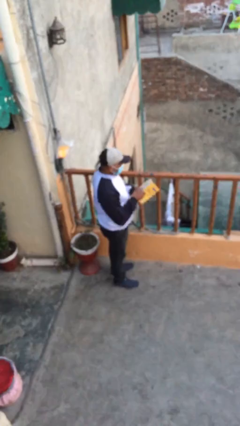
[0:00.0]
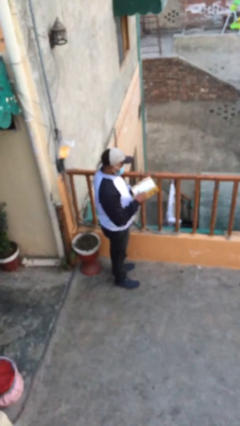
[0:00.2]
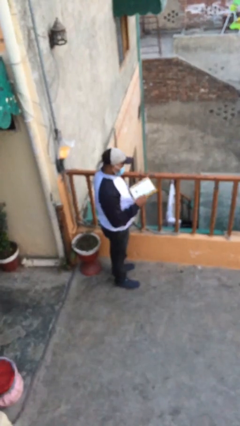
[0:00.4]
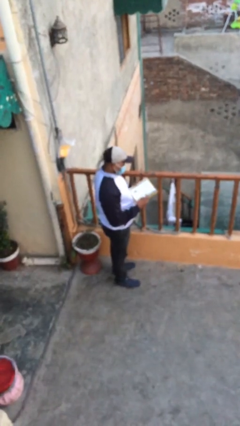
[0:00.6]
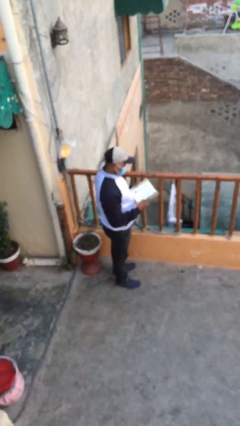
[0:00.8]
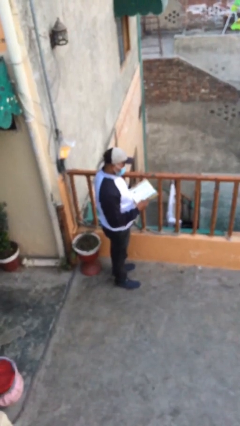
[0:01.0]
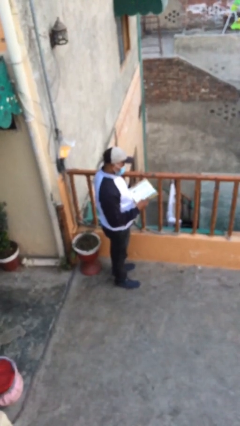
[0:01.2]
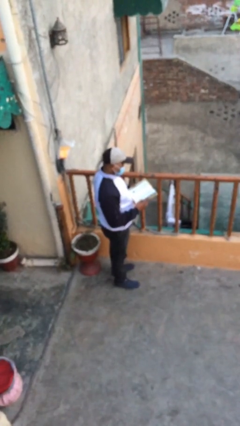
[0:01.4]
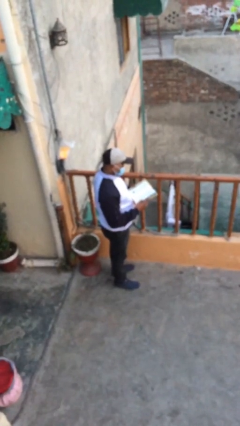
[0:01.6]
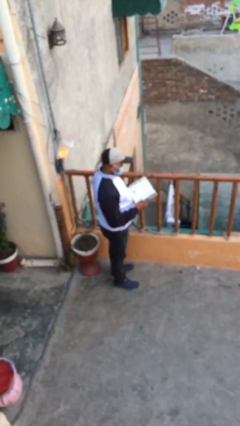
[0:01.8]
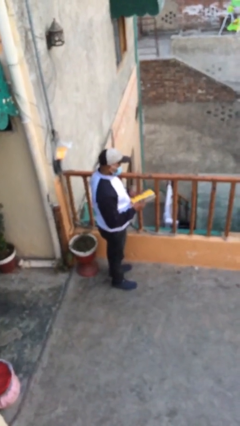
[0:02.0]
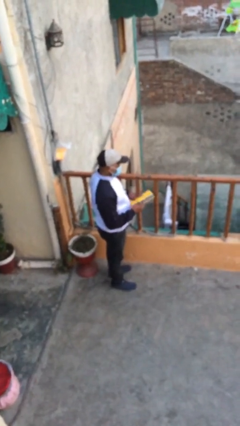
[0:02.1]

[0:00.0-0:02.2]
person reads document

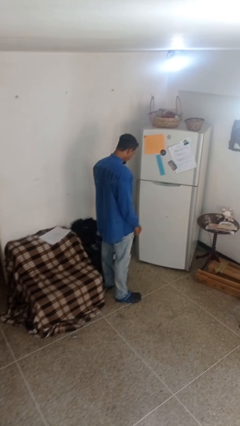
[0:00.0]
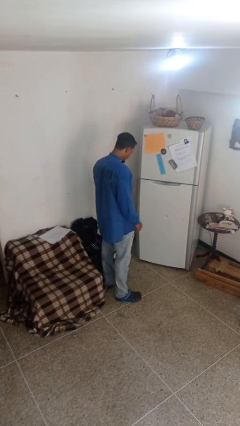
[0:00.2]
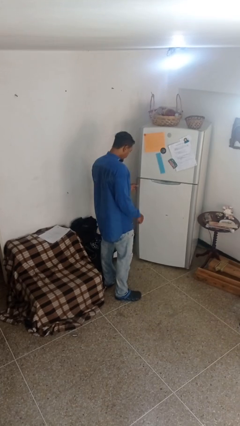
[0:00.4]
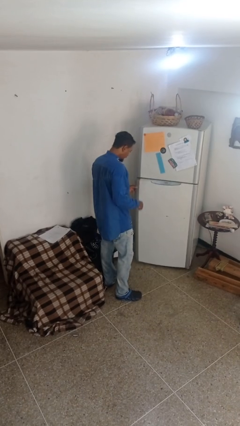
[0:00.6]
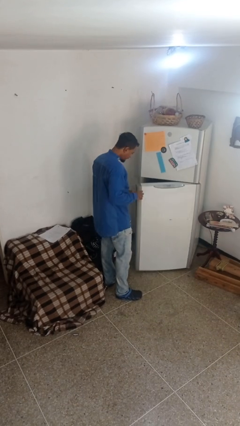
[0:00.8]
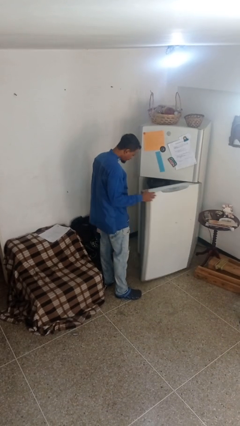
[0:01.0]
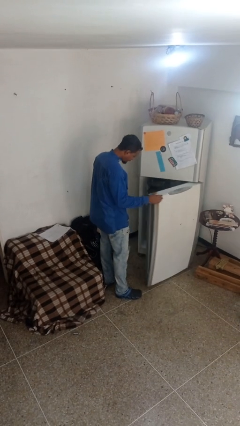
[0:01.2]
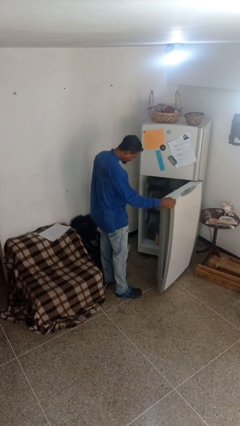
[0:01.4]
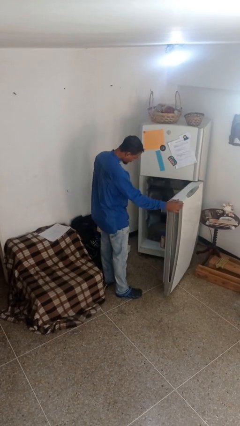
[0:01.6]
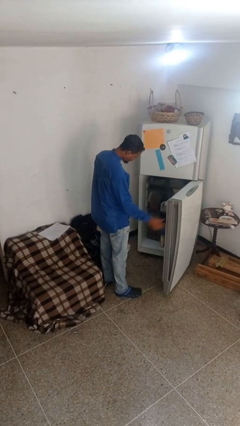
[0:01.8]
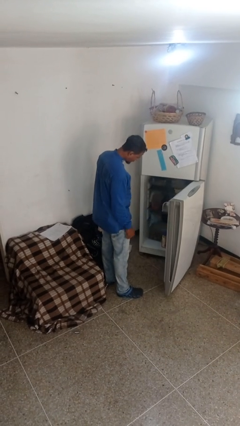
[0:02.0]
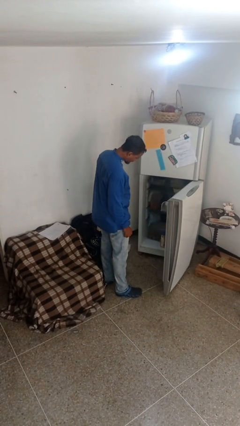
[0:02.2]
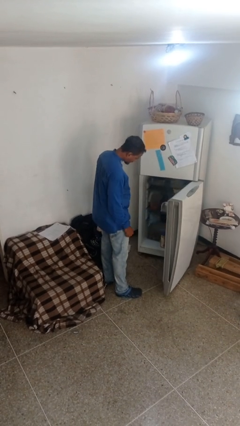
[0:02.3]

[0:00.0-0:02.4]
person opens refrigerator

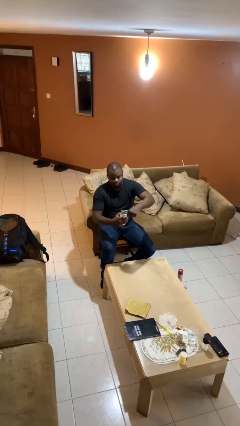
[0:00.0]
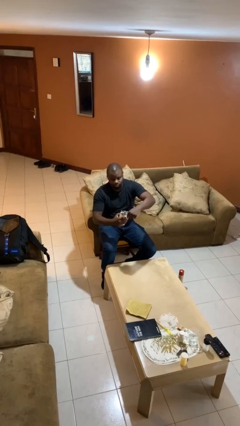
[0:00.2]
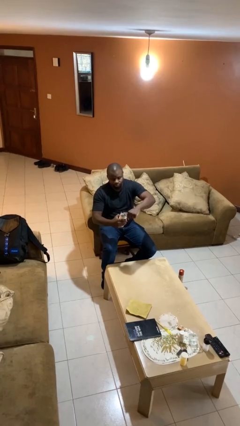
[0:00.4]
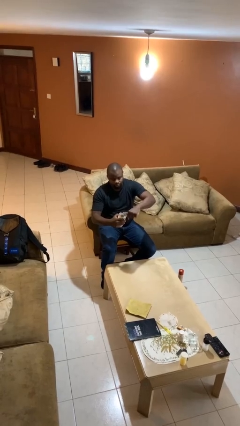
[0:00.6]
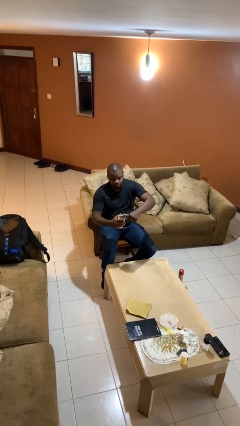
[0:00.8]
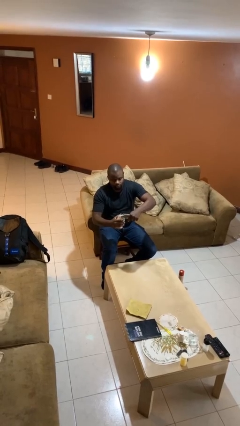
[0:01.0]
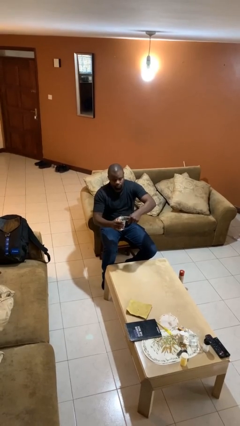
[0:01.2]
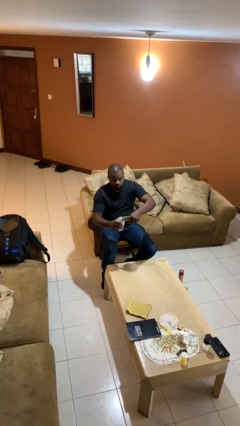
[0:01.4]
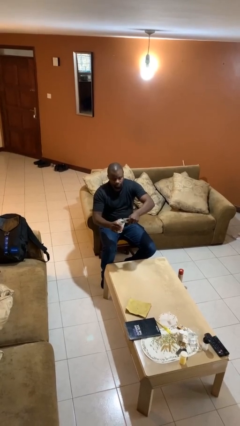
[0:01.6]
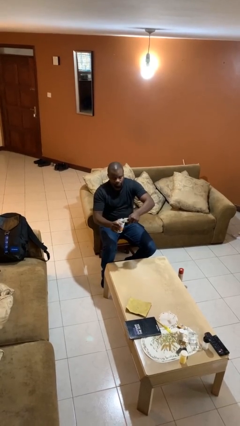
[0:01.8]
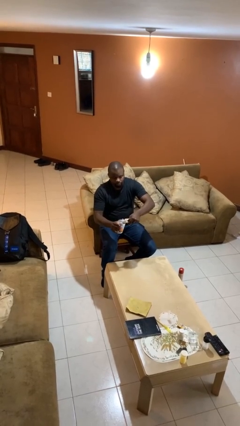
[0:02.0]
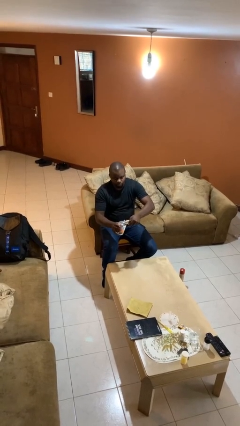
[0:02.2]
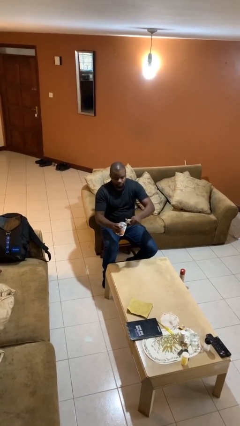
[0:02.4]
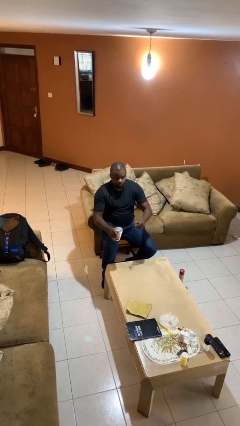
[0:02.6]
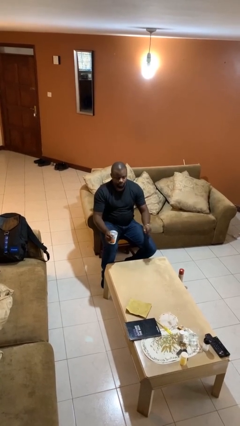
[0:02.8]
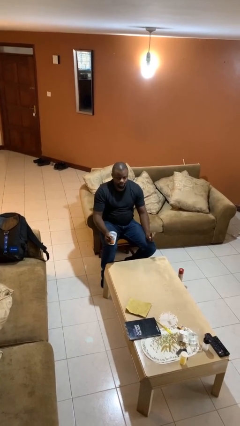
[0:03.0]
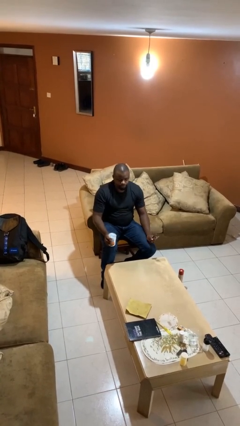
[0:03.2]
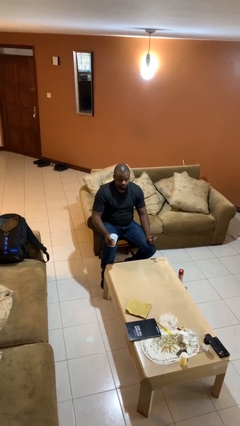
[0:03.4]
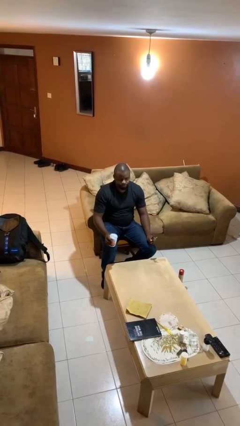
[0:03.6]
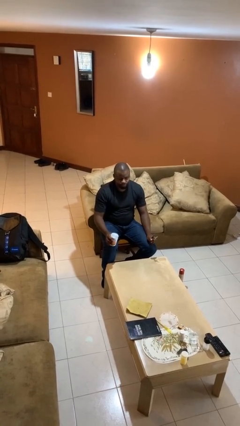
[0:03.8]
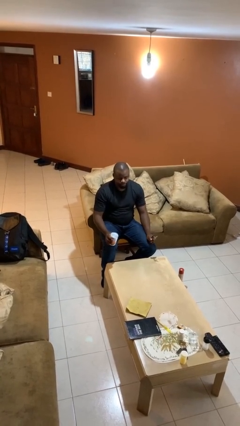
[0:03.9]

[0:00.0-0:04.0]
person opens can with can opener

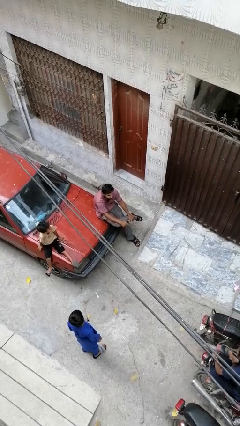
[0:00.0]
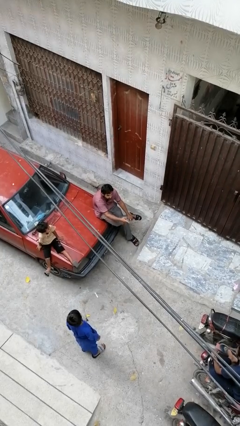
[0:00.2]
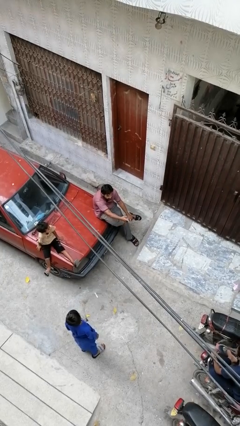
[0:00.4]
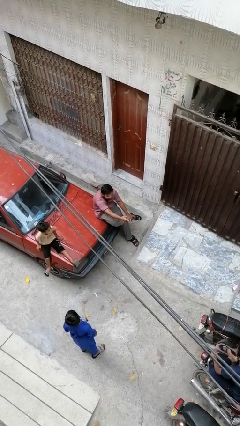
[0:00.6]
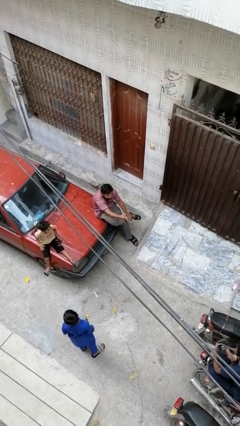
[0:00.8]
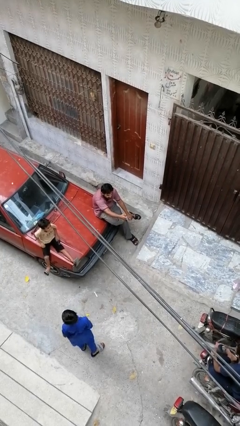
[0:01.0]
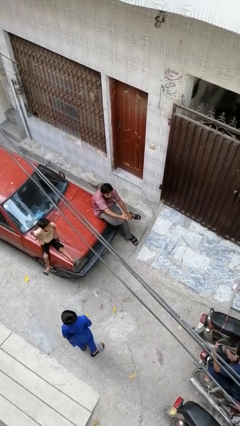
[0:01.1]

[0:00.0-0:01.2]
person points at person

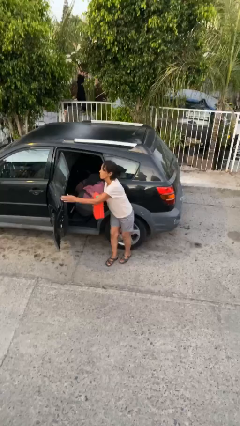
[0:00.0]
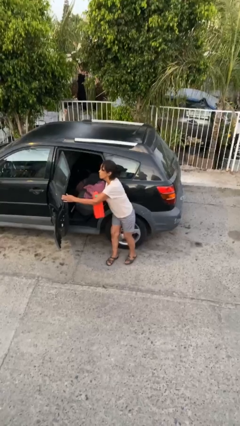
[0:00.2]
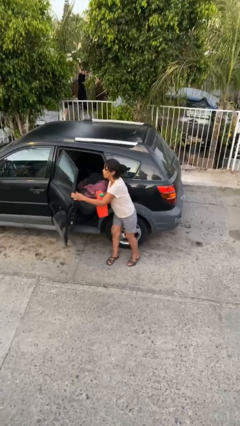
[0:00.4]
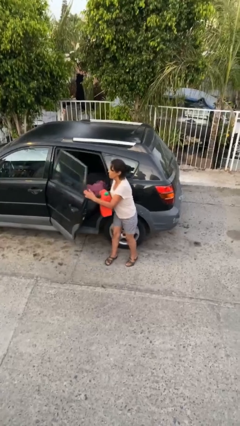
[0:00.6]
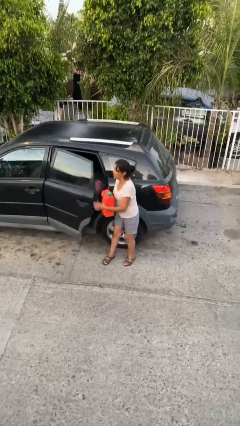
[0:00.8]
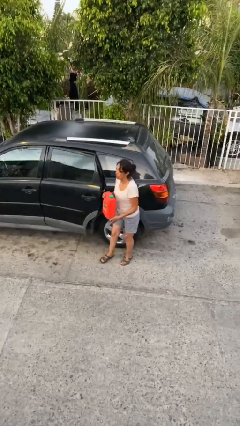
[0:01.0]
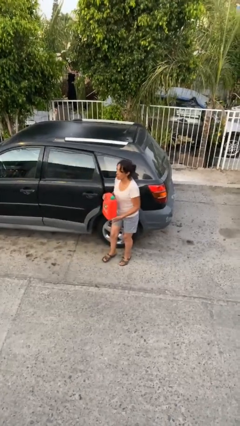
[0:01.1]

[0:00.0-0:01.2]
person closes car door

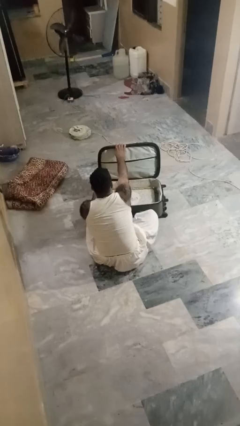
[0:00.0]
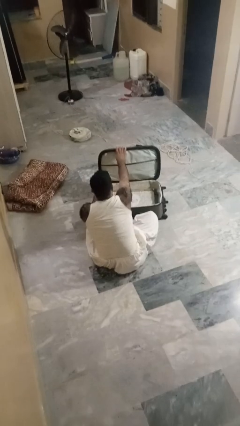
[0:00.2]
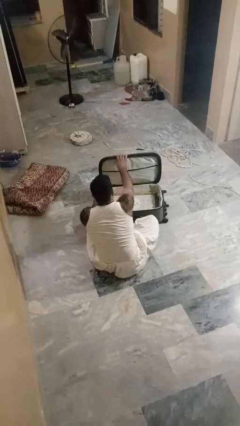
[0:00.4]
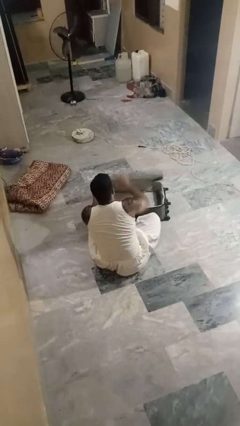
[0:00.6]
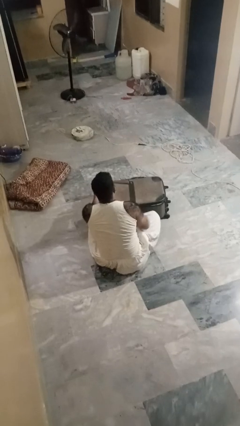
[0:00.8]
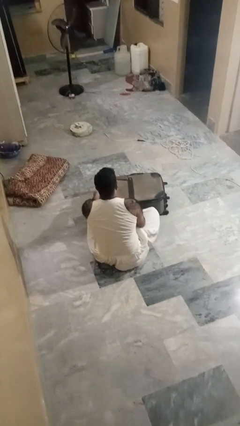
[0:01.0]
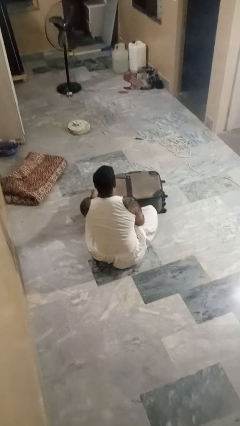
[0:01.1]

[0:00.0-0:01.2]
person closes suitcase

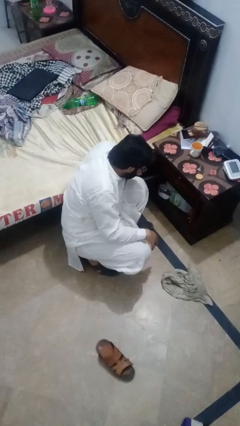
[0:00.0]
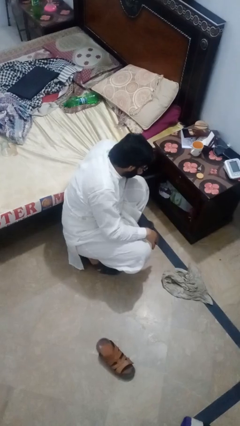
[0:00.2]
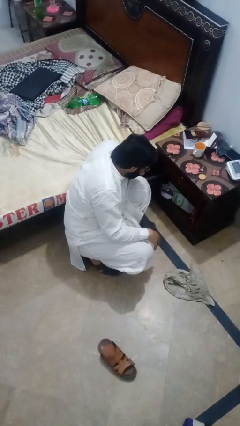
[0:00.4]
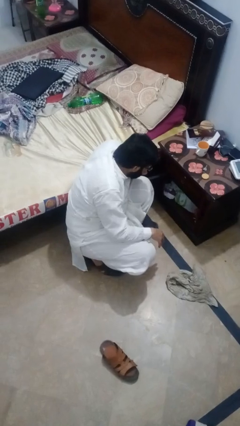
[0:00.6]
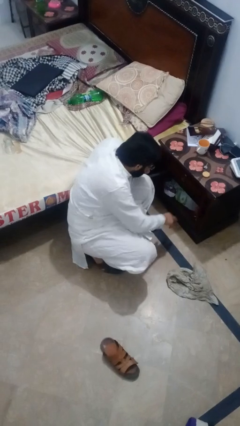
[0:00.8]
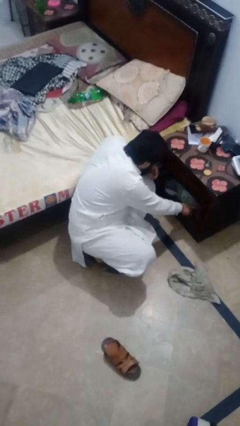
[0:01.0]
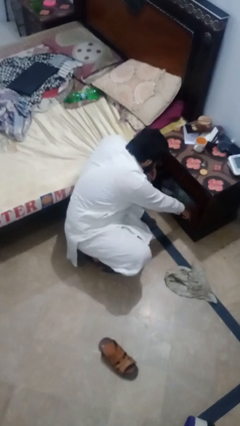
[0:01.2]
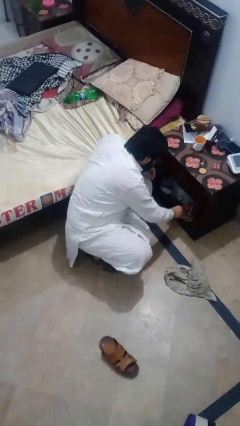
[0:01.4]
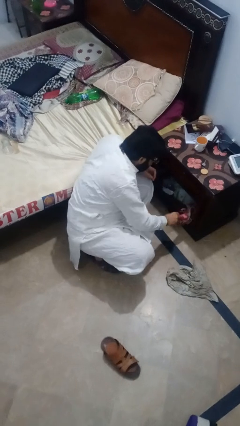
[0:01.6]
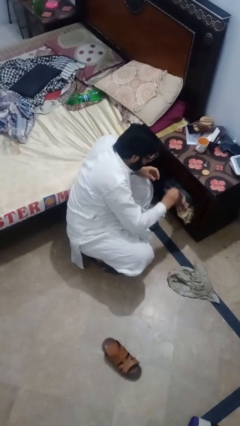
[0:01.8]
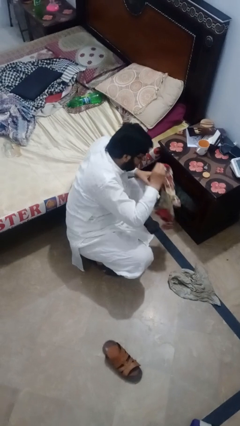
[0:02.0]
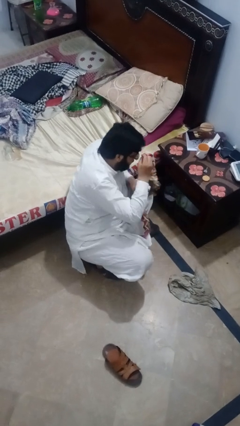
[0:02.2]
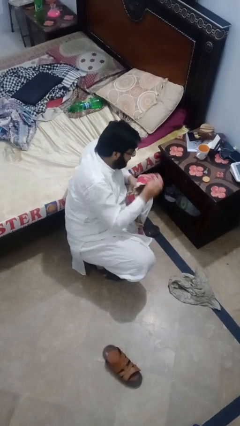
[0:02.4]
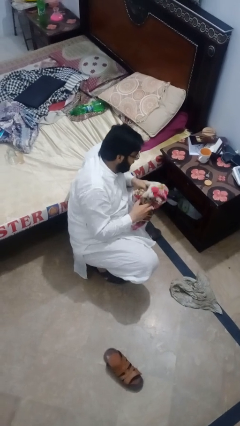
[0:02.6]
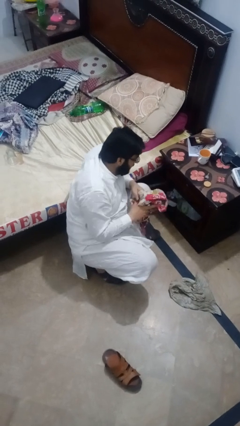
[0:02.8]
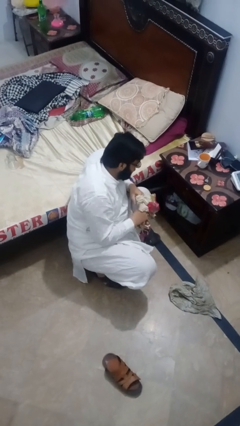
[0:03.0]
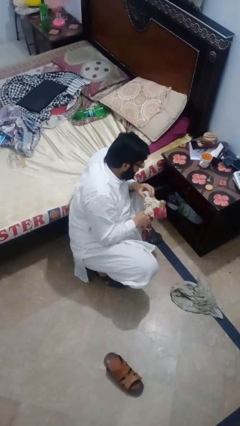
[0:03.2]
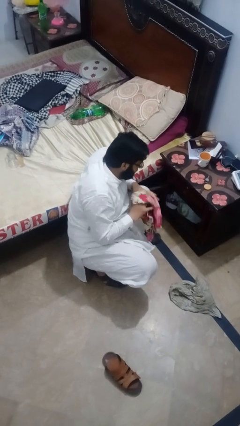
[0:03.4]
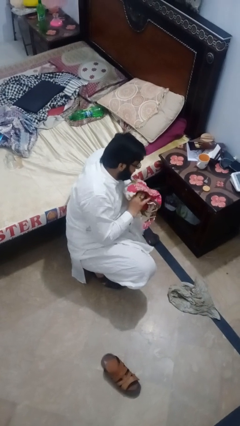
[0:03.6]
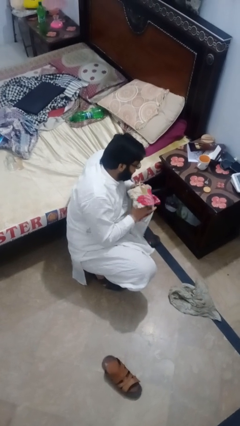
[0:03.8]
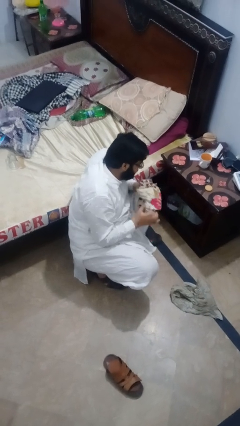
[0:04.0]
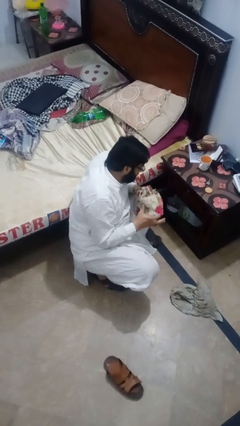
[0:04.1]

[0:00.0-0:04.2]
person picks up object from cabinet
